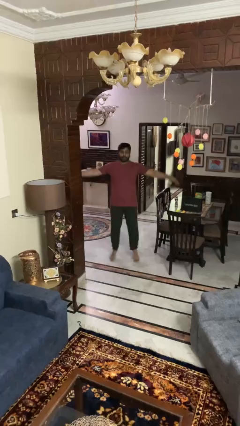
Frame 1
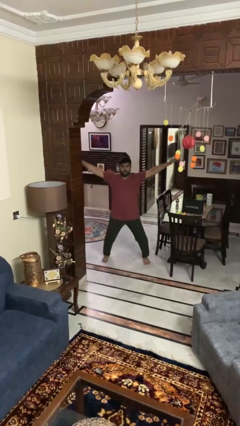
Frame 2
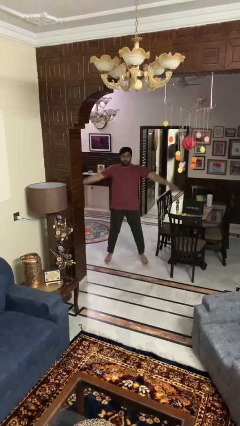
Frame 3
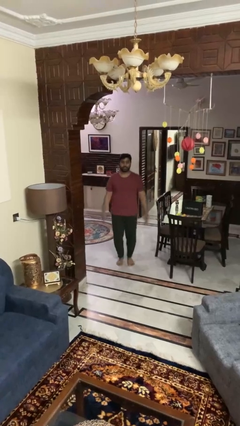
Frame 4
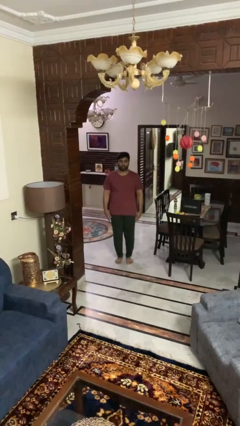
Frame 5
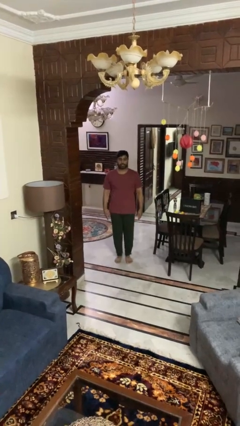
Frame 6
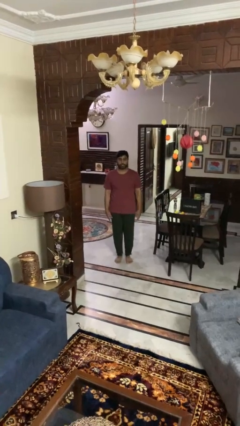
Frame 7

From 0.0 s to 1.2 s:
person exercises with jumping jacks

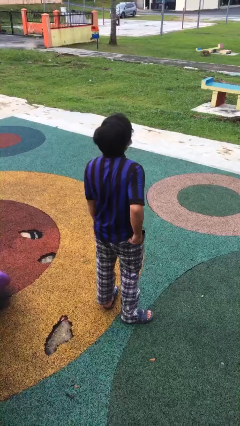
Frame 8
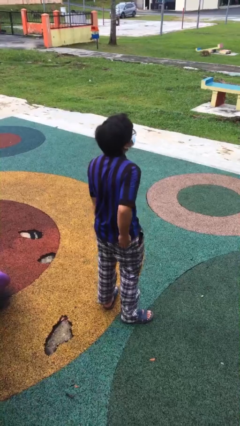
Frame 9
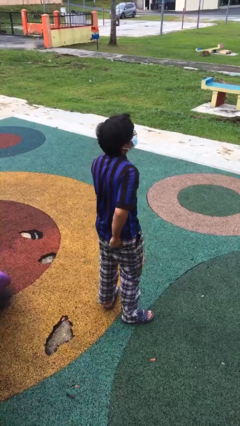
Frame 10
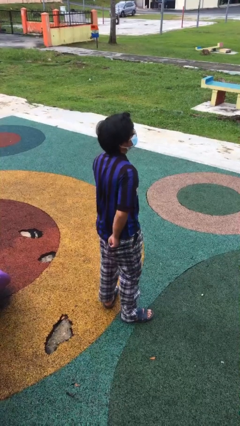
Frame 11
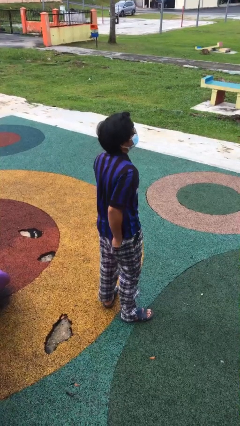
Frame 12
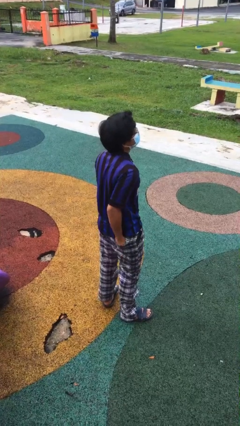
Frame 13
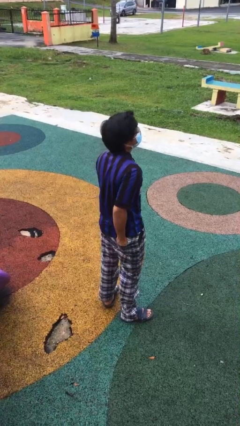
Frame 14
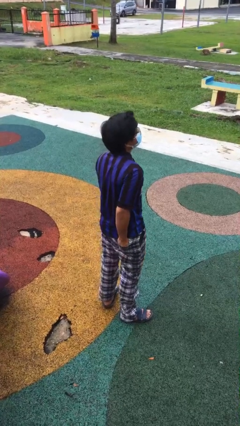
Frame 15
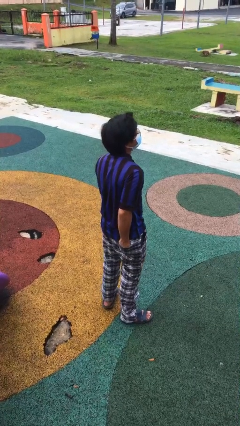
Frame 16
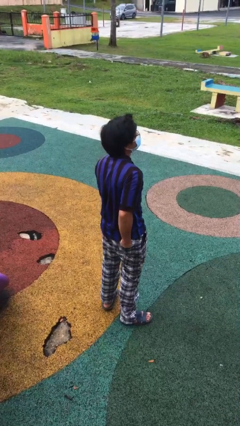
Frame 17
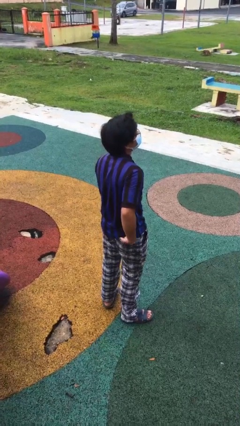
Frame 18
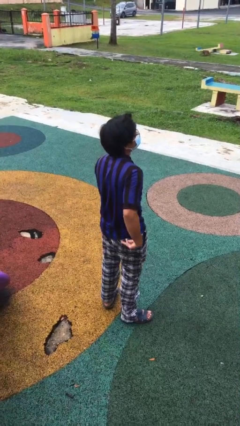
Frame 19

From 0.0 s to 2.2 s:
person puts hands in back pockets

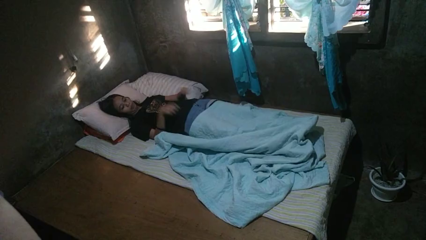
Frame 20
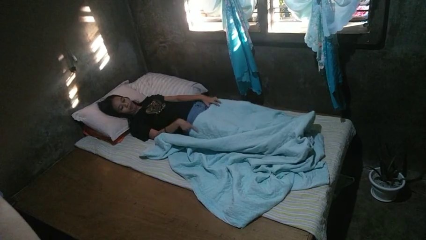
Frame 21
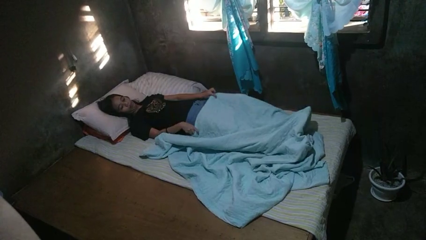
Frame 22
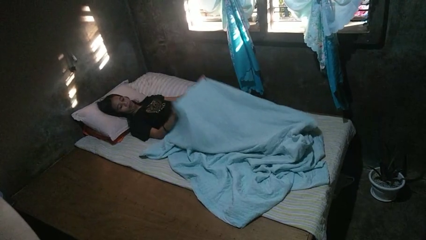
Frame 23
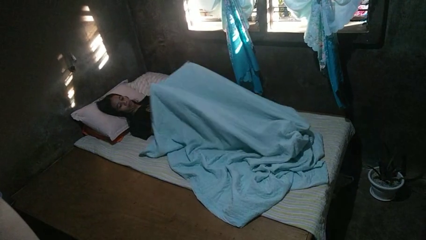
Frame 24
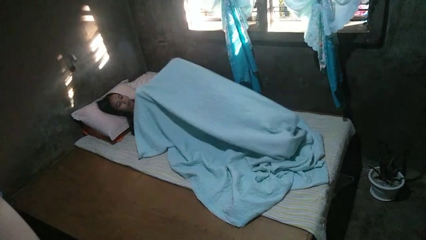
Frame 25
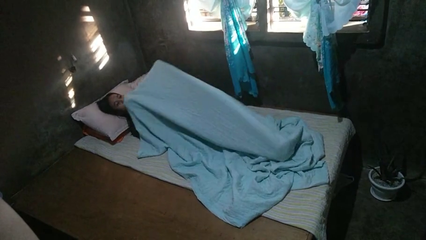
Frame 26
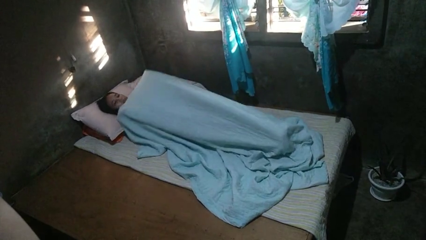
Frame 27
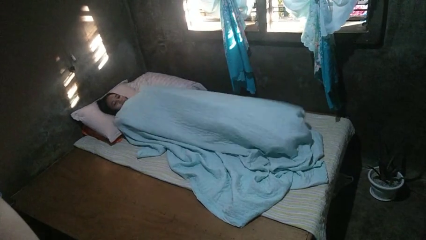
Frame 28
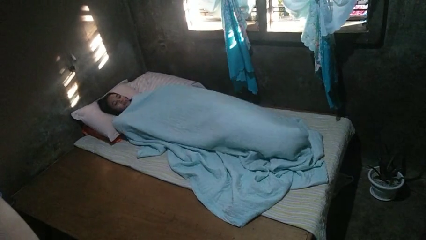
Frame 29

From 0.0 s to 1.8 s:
person covers with bedsheets

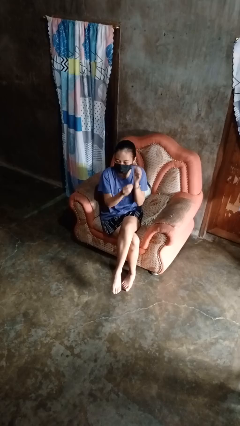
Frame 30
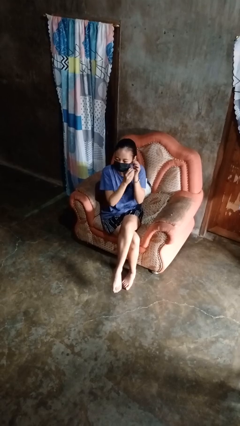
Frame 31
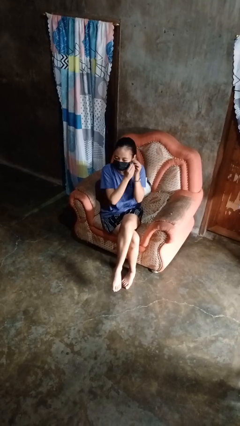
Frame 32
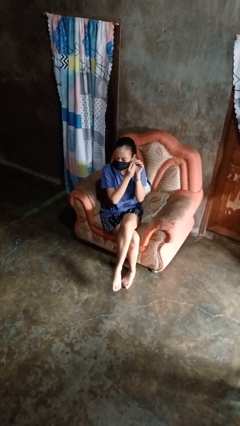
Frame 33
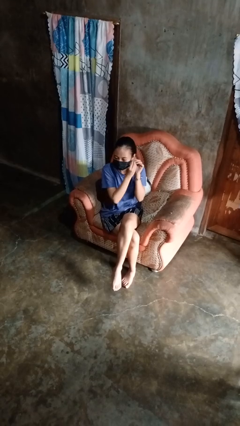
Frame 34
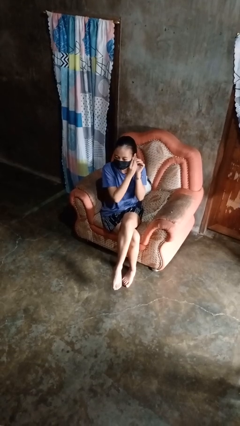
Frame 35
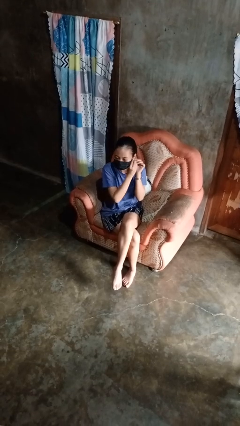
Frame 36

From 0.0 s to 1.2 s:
person puts on earrings

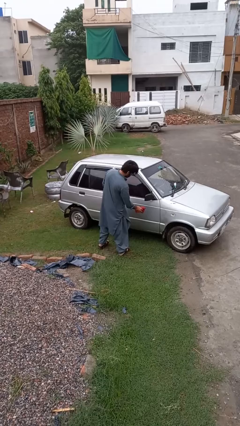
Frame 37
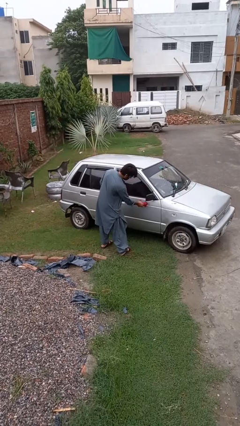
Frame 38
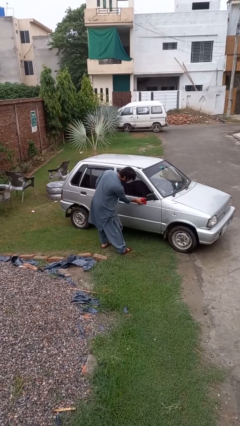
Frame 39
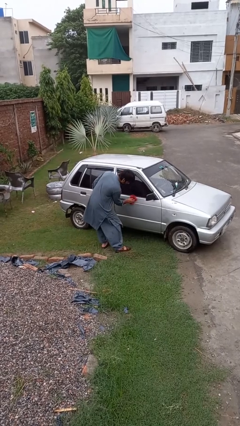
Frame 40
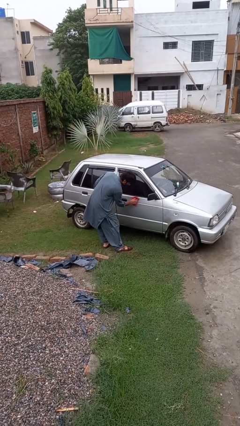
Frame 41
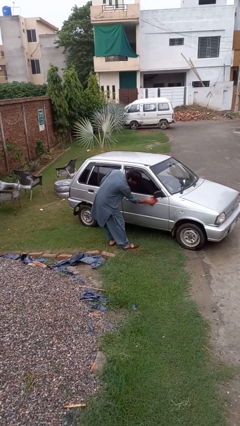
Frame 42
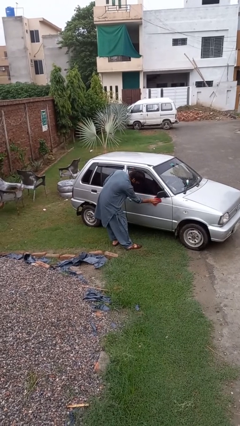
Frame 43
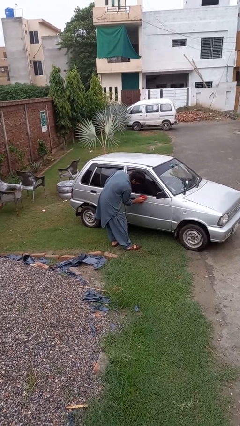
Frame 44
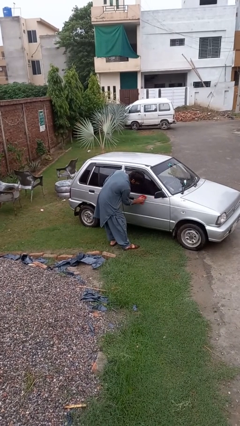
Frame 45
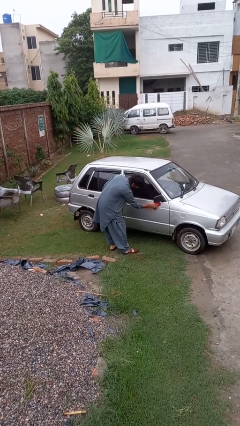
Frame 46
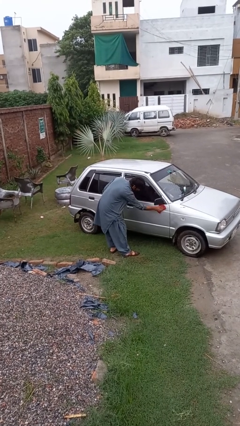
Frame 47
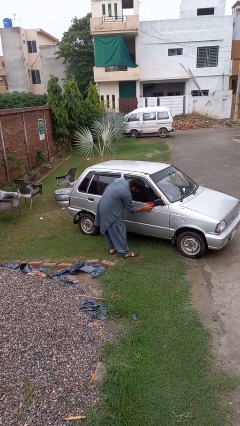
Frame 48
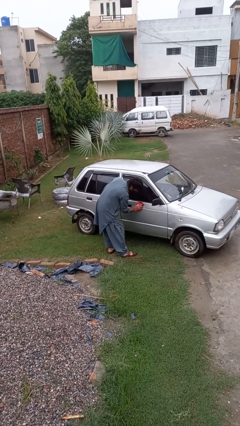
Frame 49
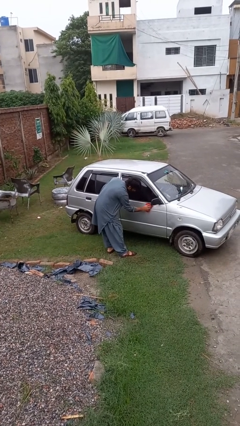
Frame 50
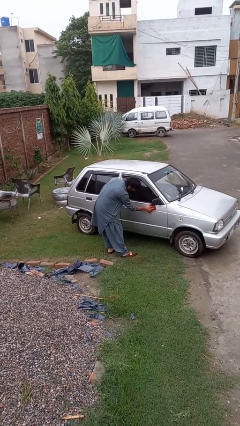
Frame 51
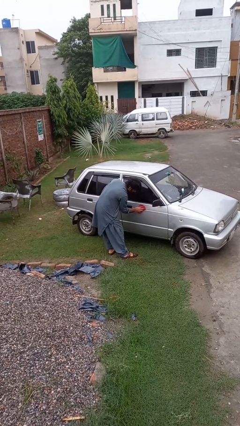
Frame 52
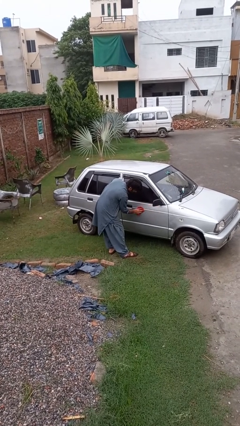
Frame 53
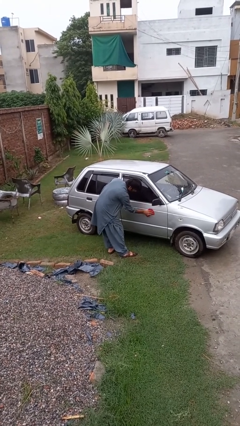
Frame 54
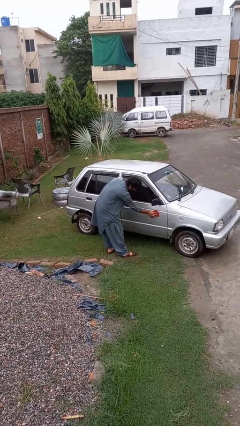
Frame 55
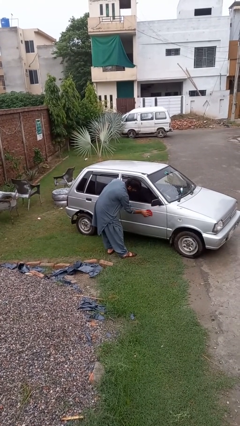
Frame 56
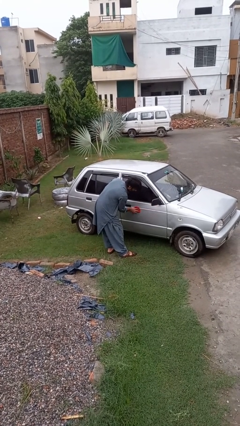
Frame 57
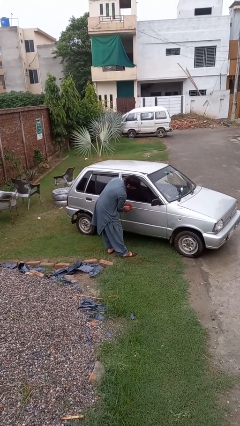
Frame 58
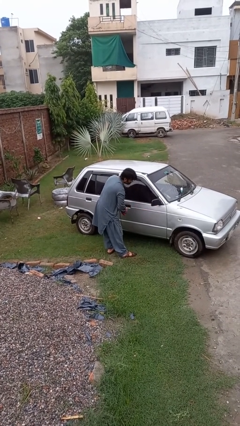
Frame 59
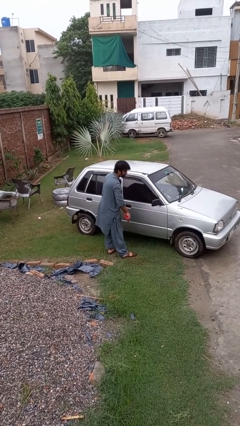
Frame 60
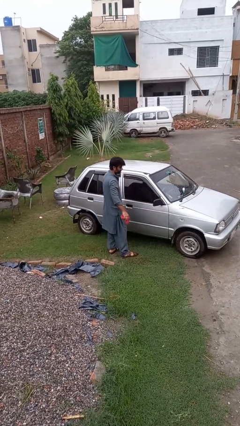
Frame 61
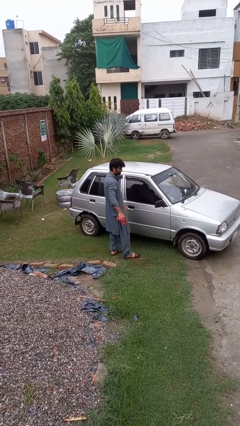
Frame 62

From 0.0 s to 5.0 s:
person polishes car with rag

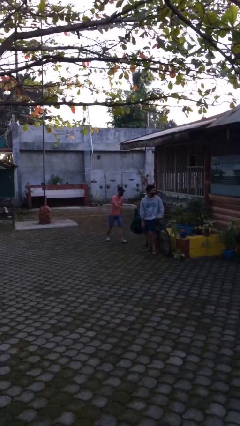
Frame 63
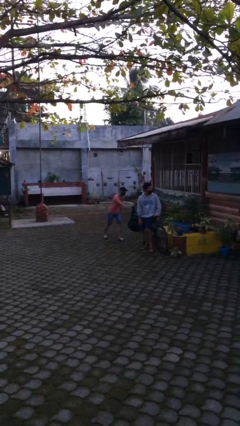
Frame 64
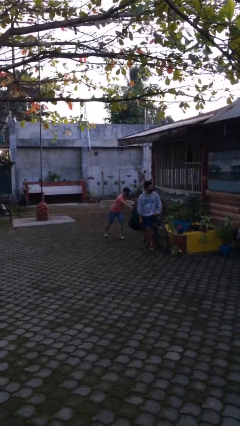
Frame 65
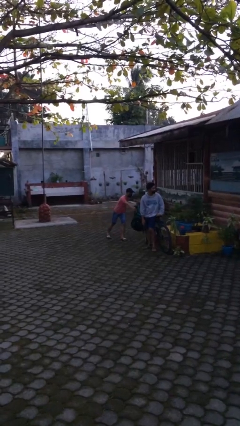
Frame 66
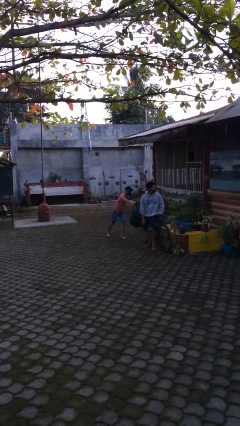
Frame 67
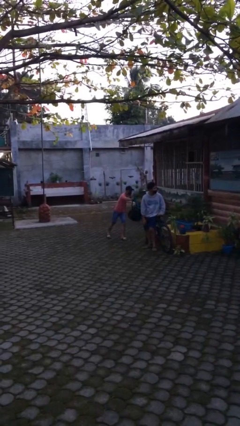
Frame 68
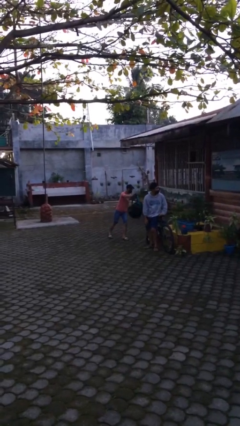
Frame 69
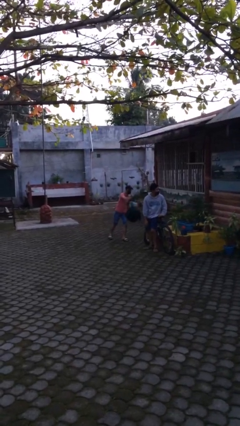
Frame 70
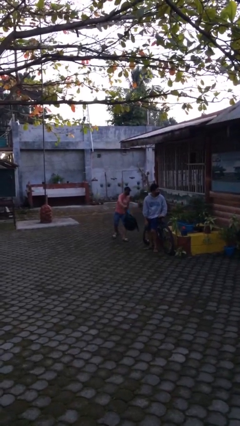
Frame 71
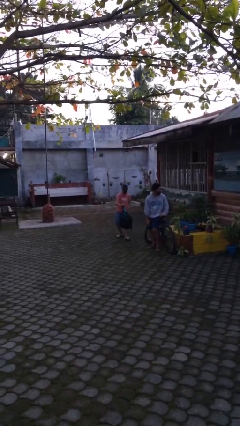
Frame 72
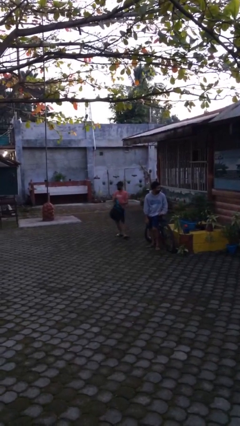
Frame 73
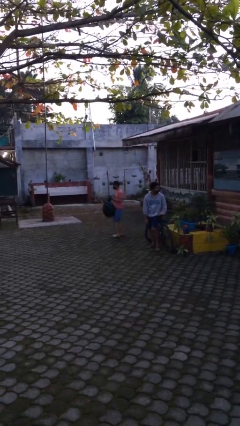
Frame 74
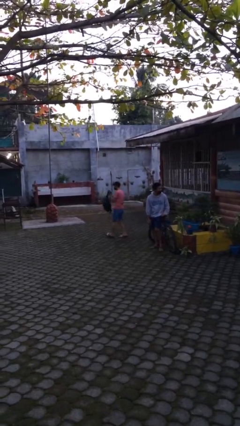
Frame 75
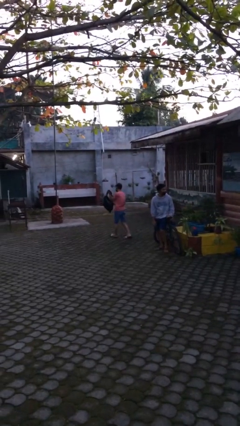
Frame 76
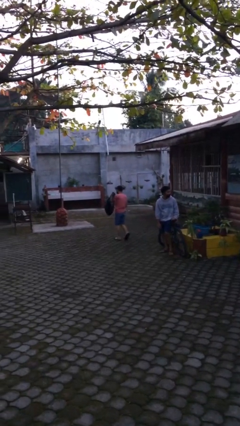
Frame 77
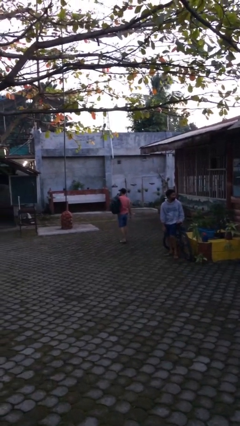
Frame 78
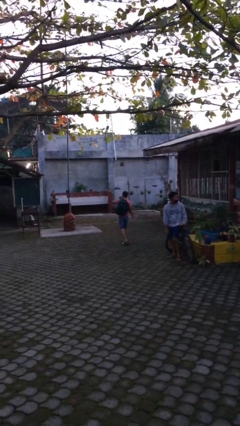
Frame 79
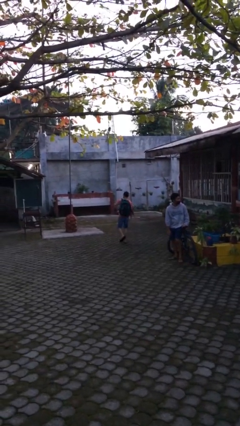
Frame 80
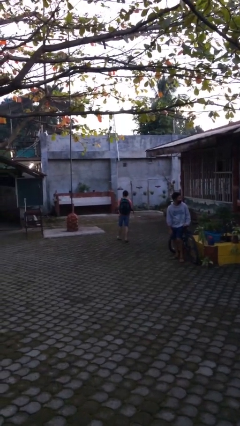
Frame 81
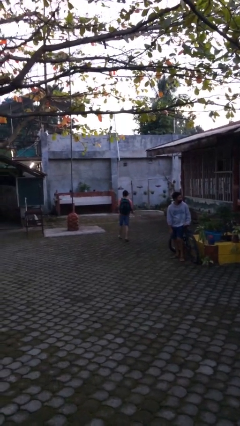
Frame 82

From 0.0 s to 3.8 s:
person steals object from person

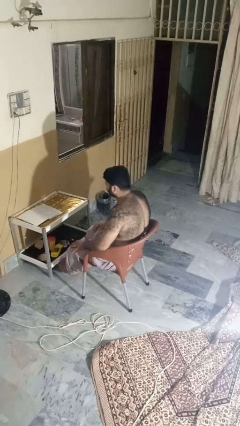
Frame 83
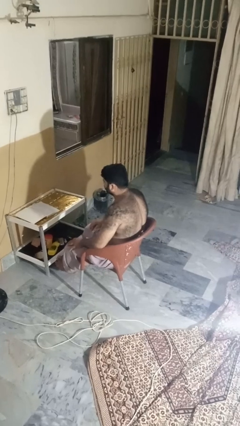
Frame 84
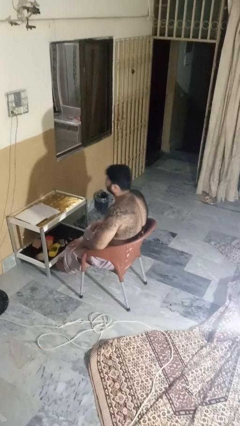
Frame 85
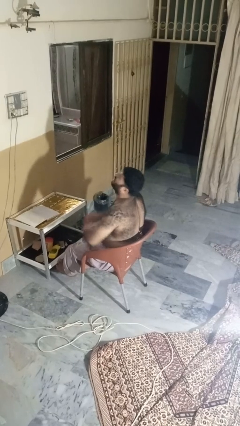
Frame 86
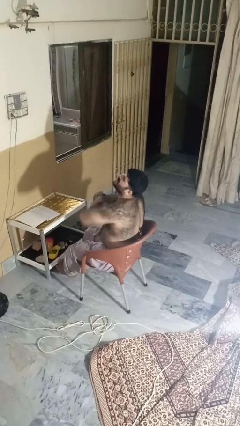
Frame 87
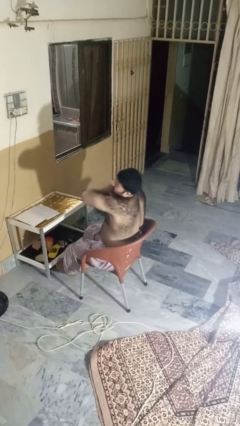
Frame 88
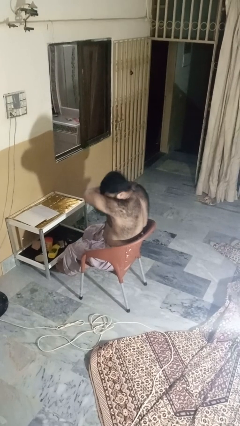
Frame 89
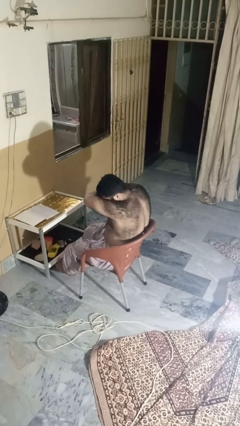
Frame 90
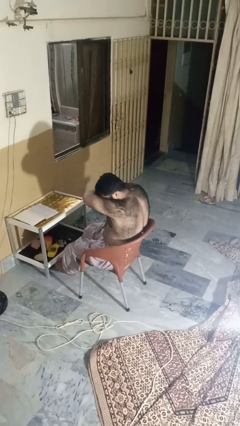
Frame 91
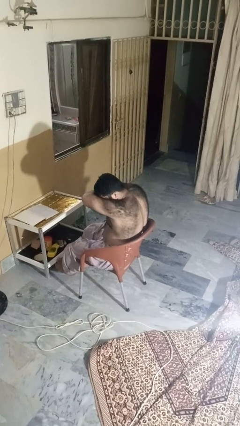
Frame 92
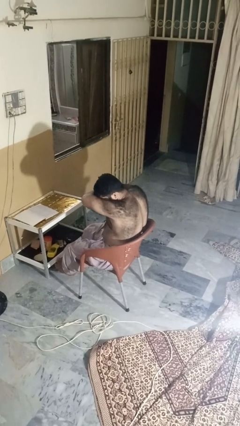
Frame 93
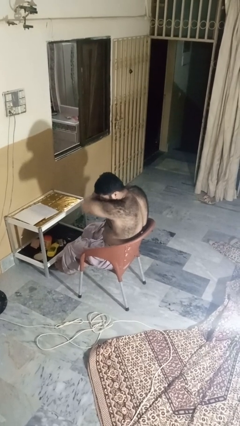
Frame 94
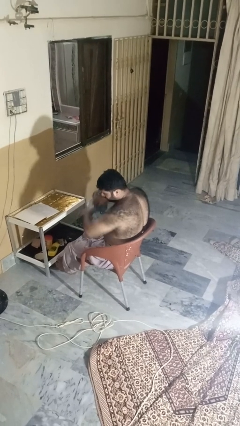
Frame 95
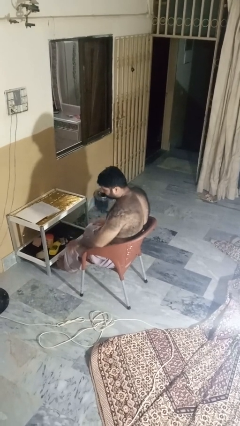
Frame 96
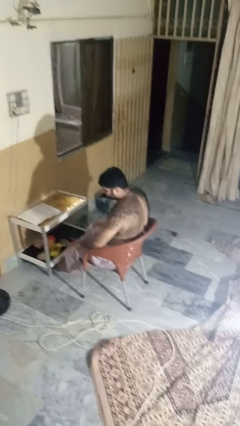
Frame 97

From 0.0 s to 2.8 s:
person sneezes into arm
